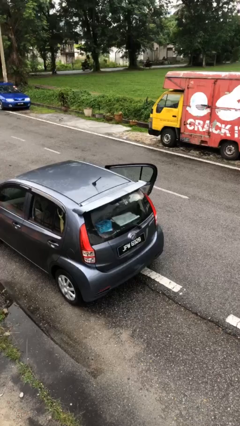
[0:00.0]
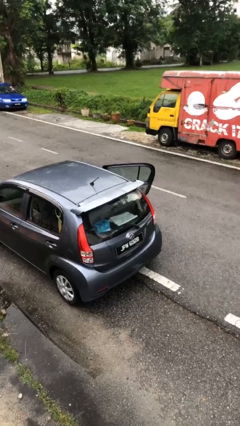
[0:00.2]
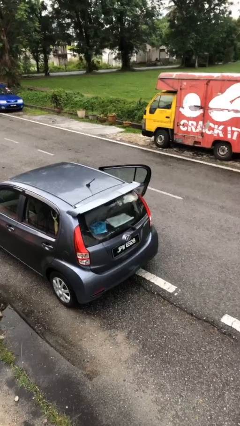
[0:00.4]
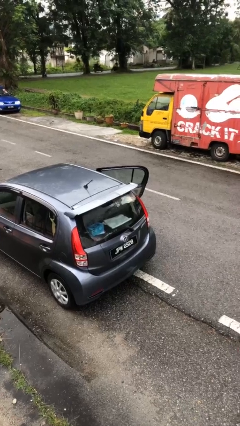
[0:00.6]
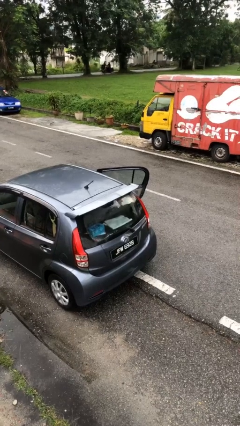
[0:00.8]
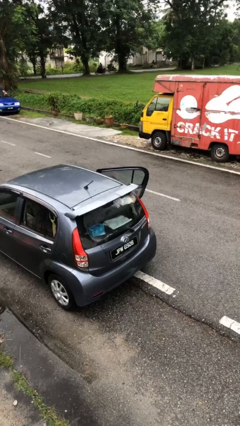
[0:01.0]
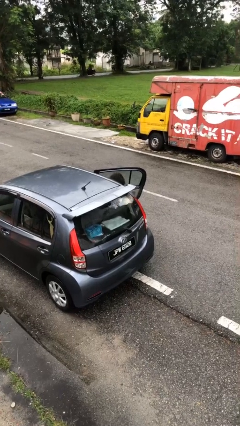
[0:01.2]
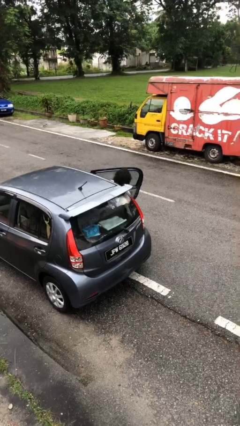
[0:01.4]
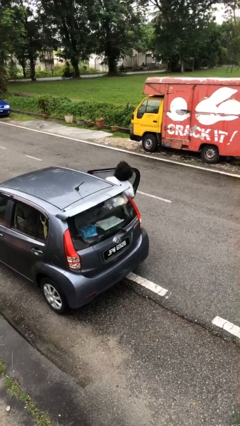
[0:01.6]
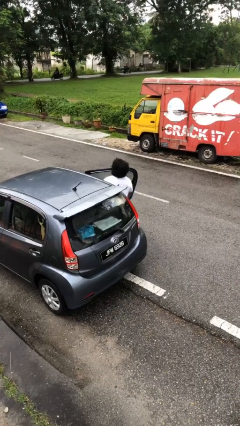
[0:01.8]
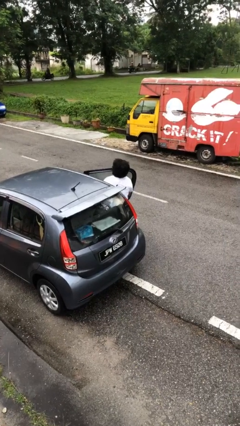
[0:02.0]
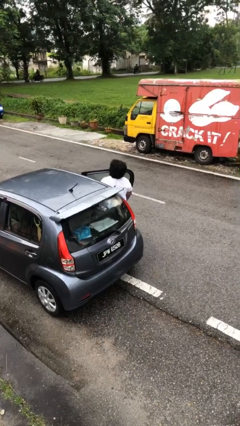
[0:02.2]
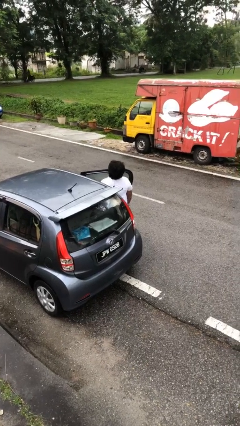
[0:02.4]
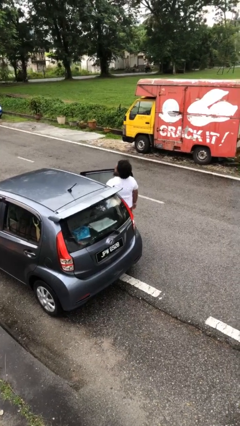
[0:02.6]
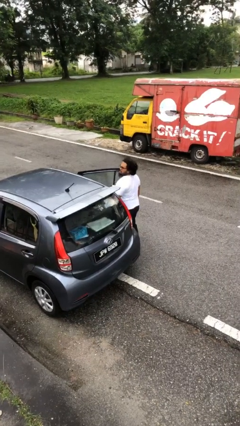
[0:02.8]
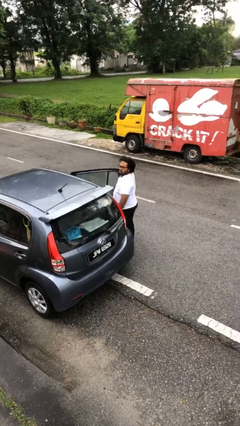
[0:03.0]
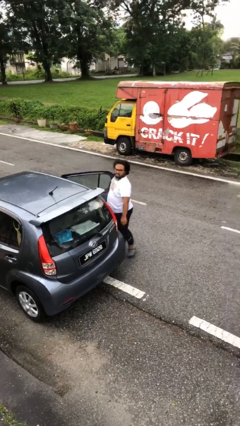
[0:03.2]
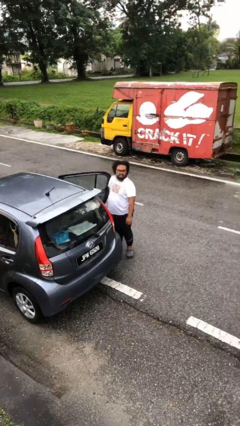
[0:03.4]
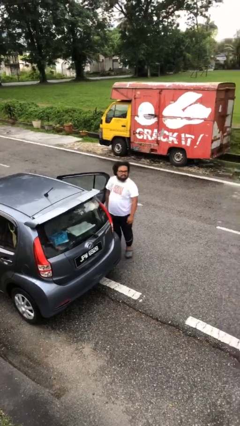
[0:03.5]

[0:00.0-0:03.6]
person exits car

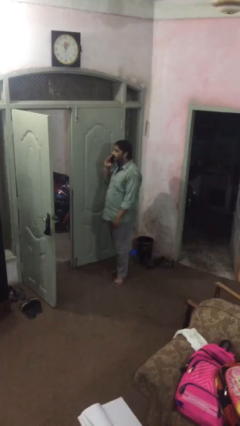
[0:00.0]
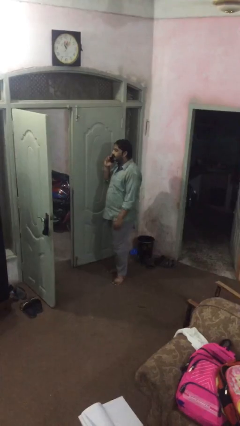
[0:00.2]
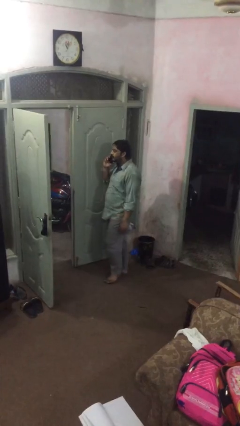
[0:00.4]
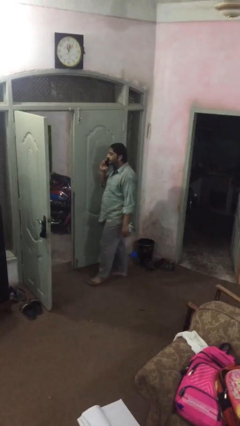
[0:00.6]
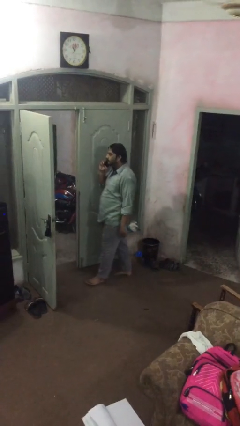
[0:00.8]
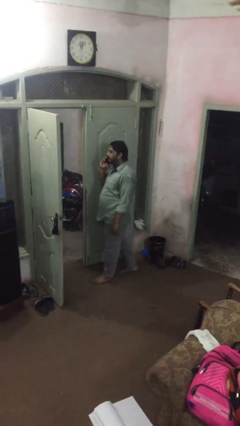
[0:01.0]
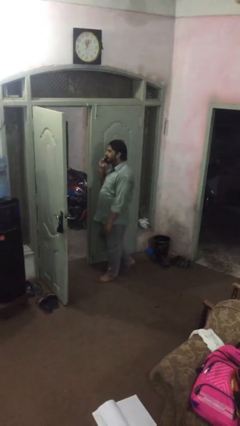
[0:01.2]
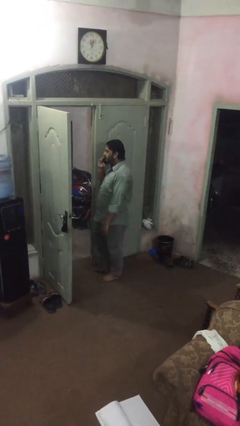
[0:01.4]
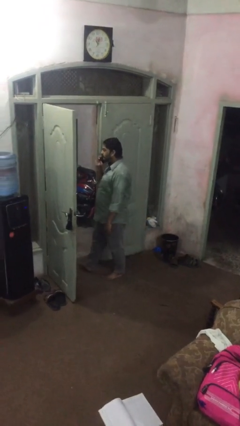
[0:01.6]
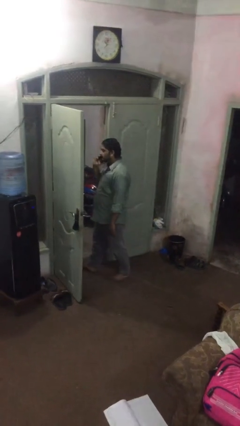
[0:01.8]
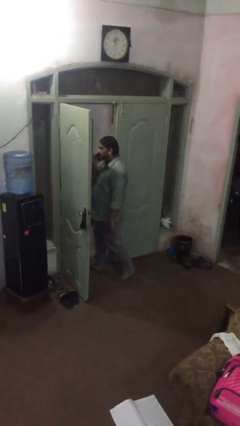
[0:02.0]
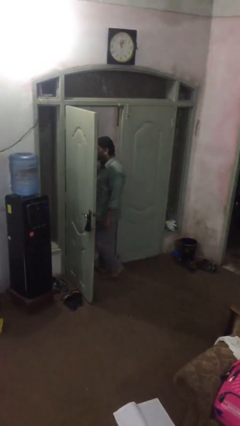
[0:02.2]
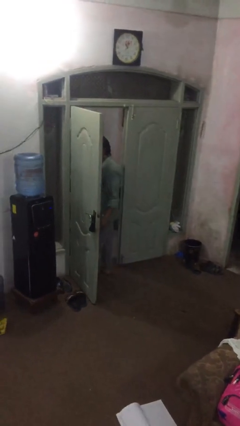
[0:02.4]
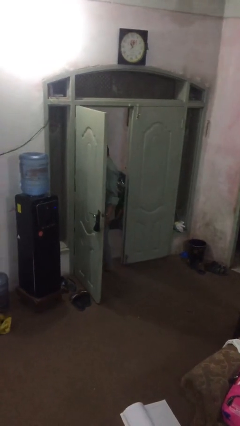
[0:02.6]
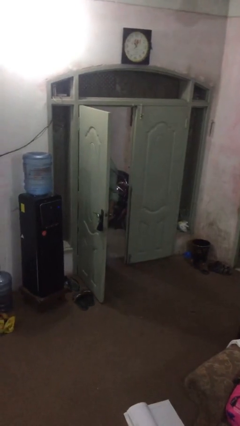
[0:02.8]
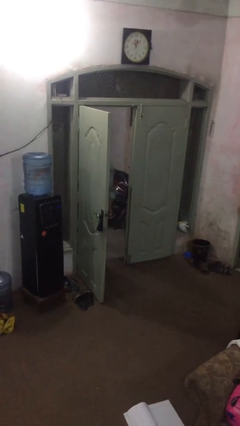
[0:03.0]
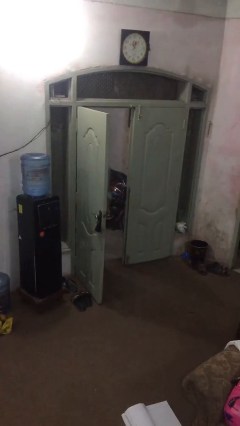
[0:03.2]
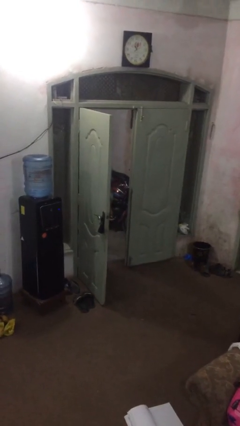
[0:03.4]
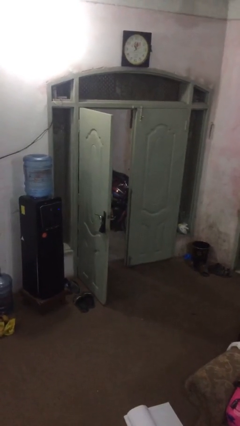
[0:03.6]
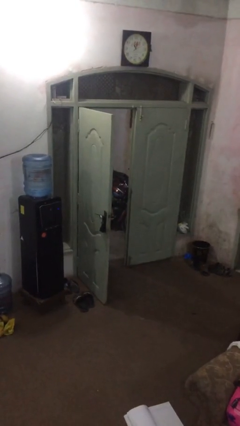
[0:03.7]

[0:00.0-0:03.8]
person exits scene through structure

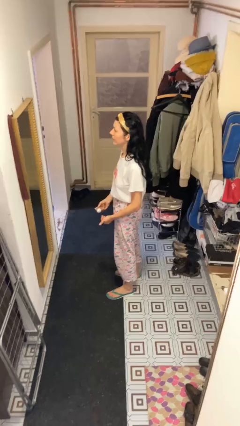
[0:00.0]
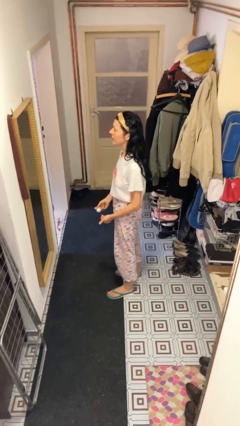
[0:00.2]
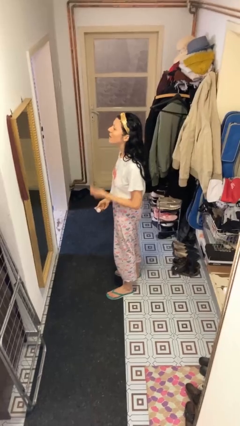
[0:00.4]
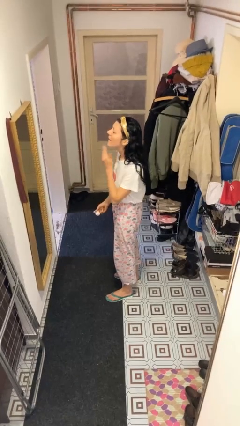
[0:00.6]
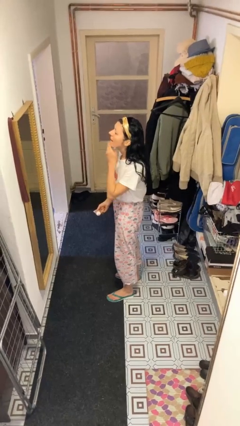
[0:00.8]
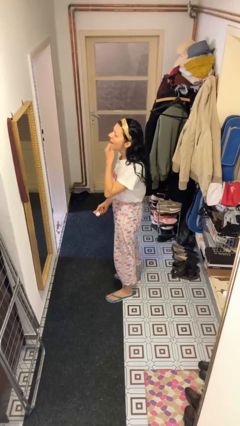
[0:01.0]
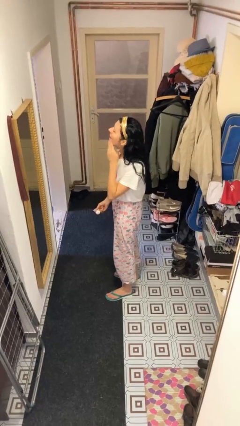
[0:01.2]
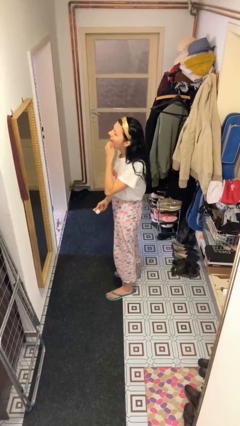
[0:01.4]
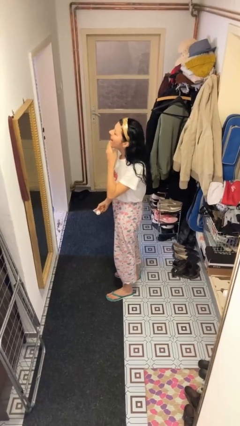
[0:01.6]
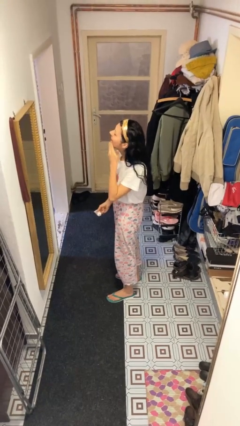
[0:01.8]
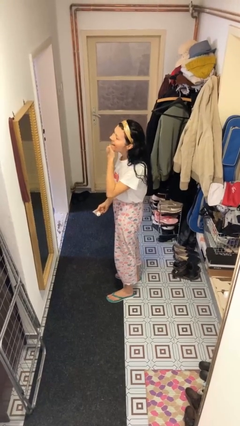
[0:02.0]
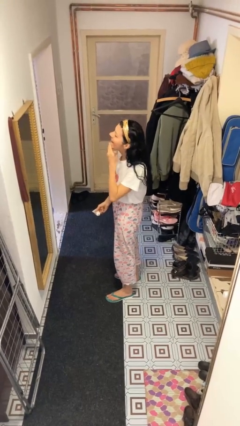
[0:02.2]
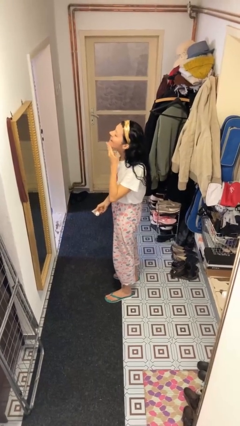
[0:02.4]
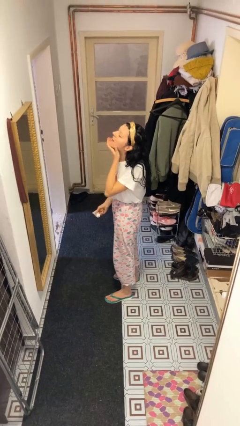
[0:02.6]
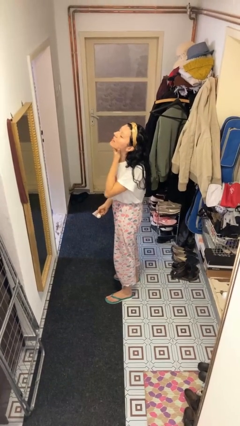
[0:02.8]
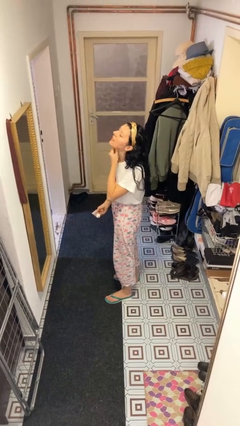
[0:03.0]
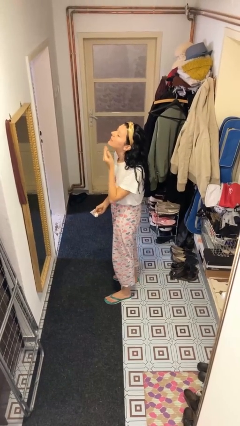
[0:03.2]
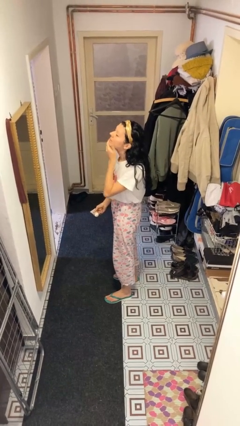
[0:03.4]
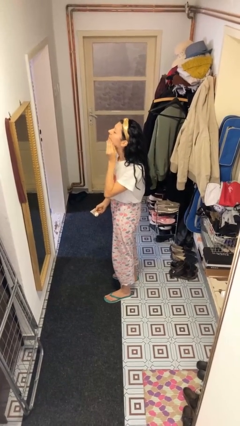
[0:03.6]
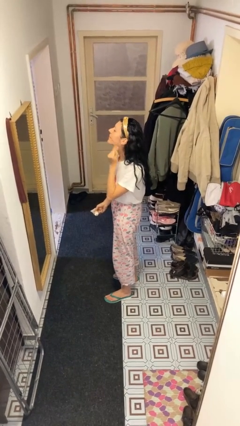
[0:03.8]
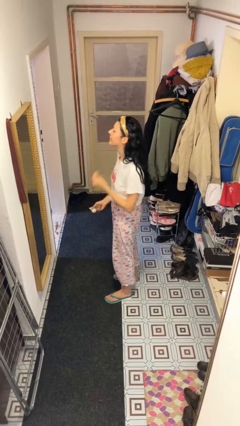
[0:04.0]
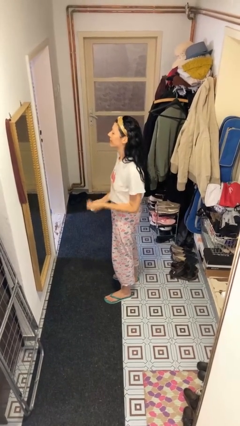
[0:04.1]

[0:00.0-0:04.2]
person applies foundation makeup

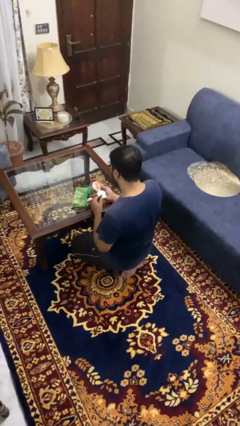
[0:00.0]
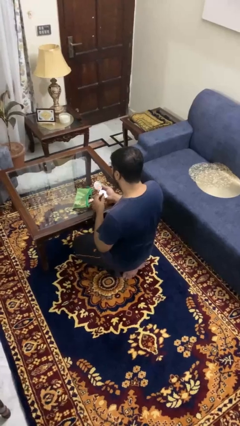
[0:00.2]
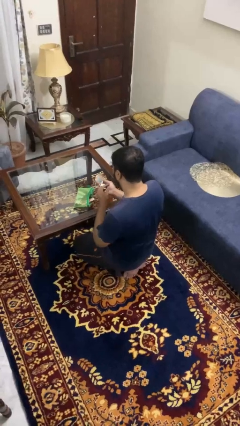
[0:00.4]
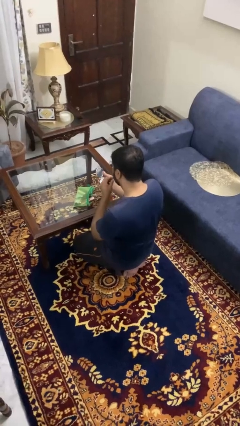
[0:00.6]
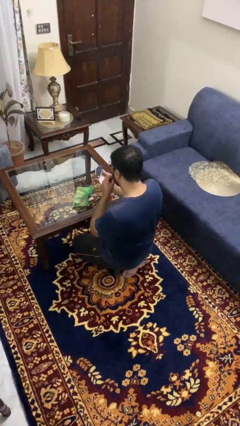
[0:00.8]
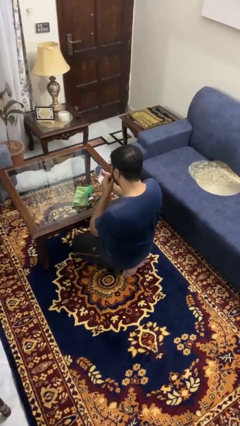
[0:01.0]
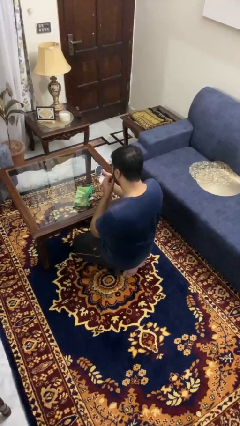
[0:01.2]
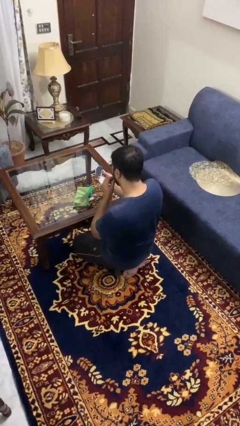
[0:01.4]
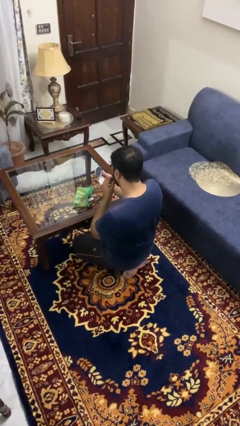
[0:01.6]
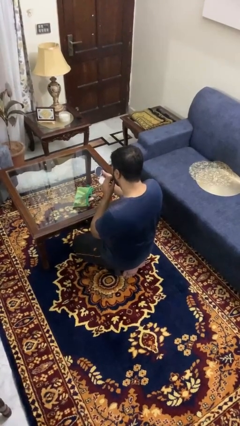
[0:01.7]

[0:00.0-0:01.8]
person applies lip makeup

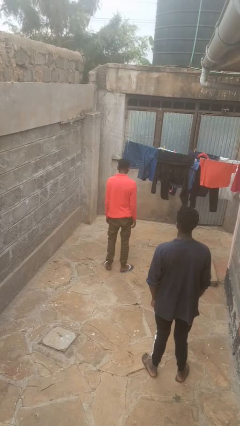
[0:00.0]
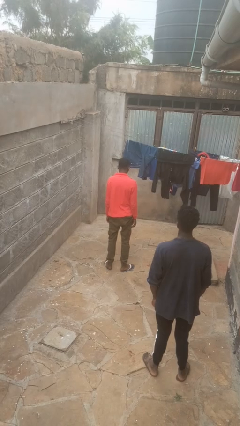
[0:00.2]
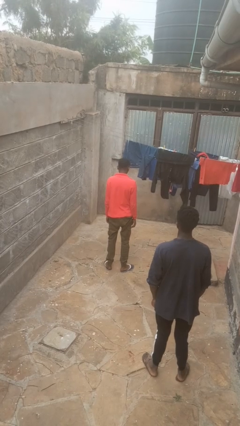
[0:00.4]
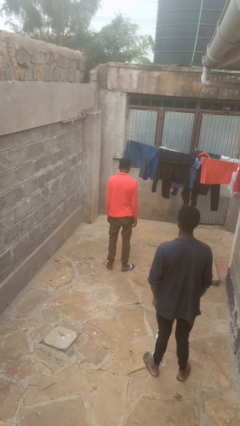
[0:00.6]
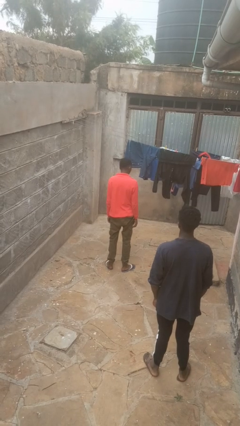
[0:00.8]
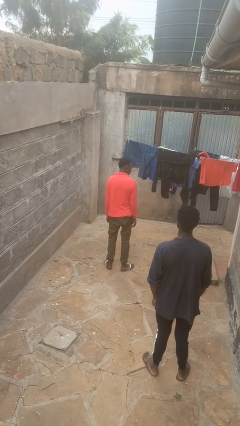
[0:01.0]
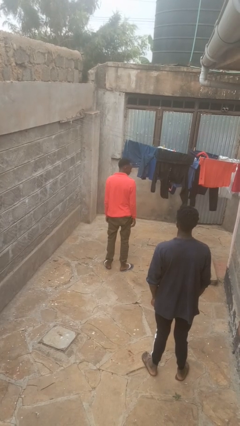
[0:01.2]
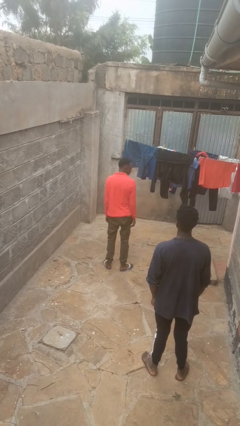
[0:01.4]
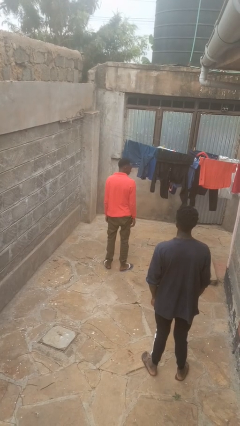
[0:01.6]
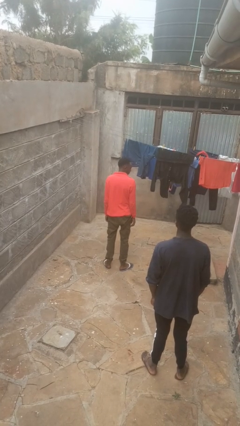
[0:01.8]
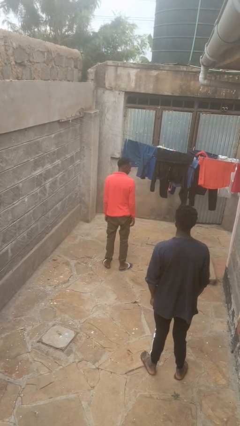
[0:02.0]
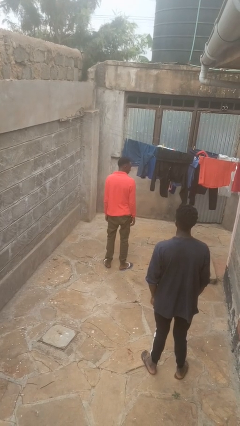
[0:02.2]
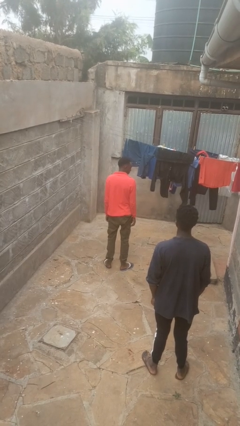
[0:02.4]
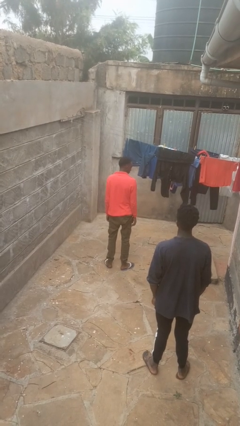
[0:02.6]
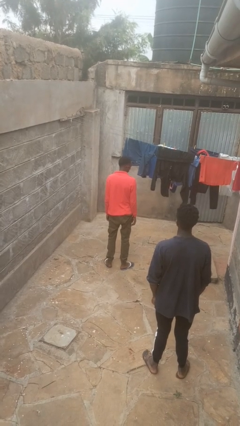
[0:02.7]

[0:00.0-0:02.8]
person looks over shoulder

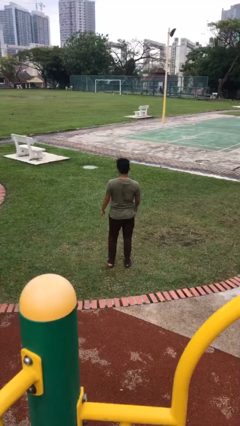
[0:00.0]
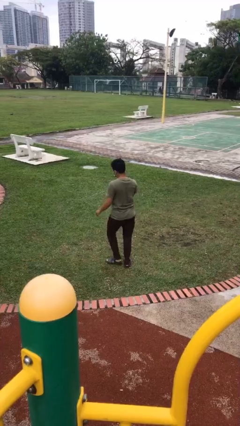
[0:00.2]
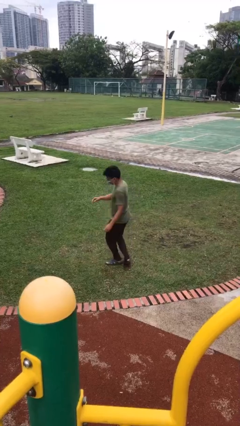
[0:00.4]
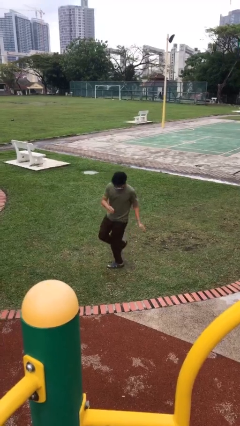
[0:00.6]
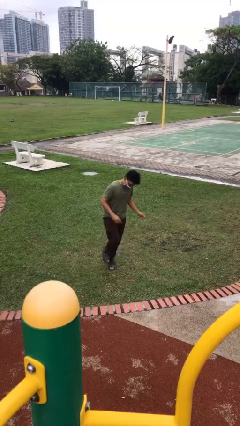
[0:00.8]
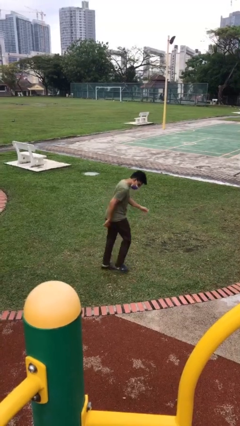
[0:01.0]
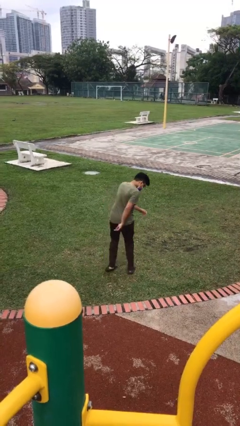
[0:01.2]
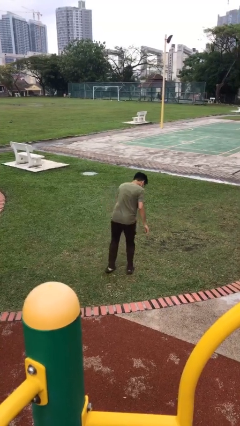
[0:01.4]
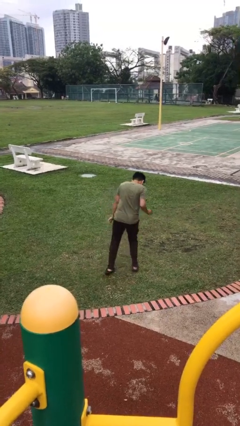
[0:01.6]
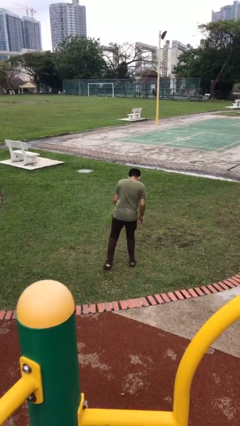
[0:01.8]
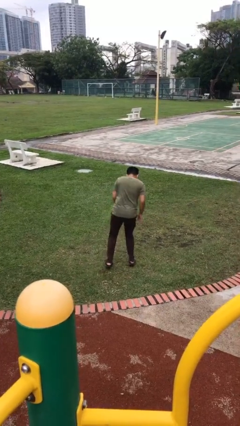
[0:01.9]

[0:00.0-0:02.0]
person twirls
